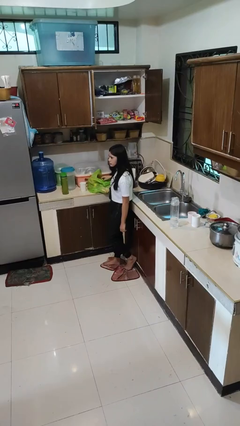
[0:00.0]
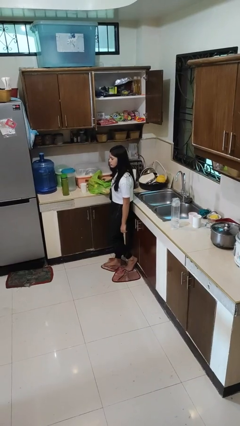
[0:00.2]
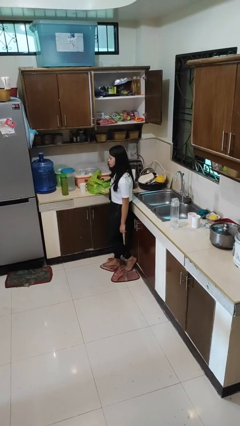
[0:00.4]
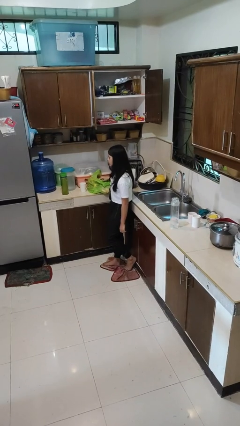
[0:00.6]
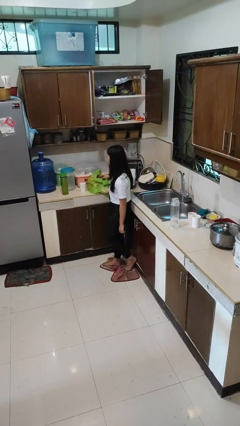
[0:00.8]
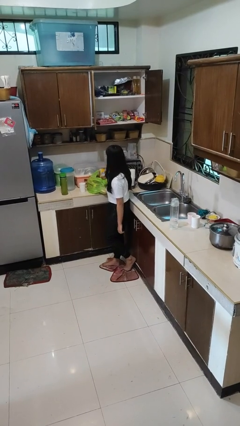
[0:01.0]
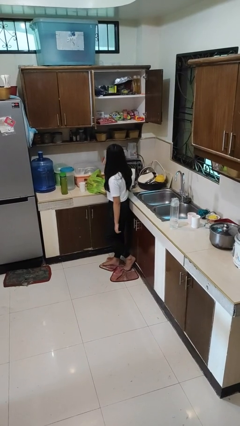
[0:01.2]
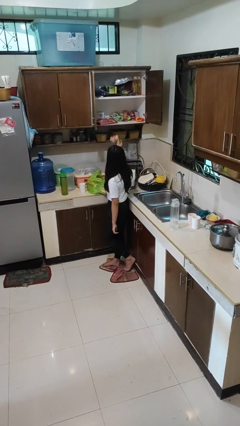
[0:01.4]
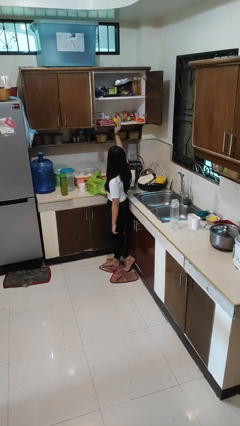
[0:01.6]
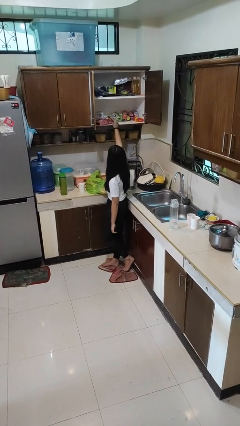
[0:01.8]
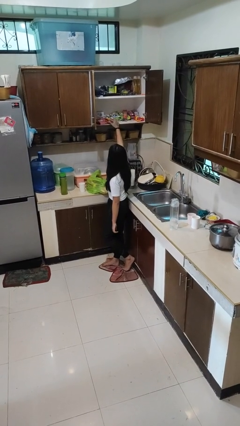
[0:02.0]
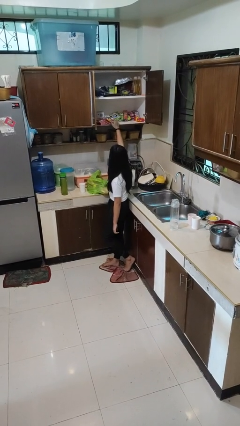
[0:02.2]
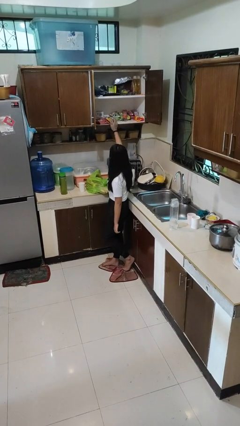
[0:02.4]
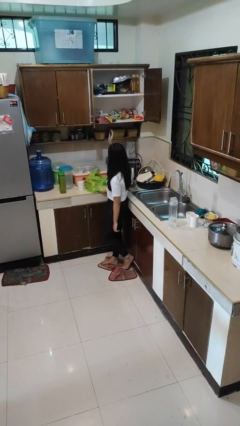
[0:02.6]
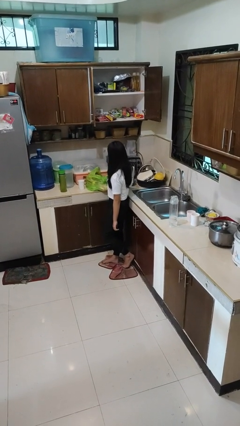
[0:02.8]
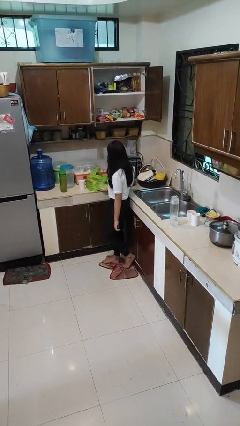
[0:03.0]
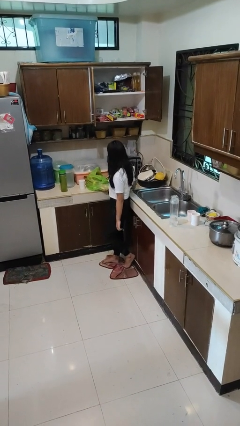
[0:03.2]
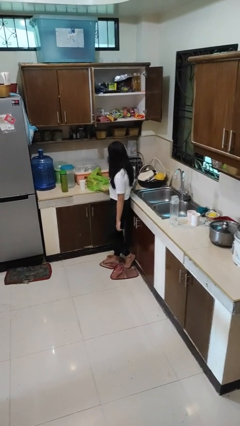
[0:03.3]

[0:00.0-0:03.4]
person loads groceries into cabinet

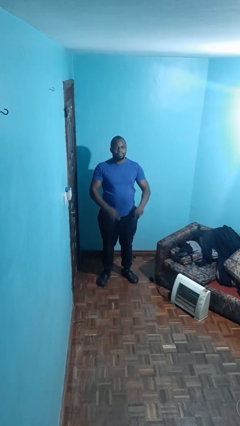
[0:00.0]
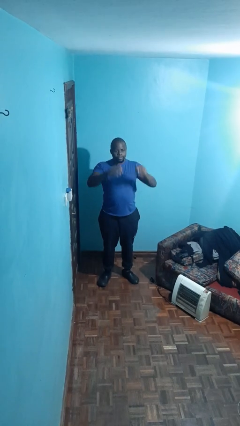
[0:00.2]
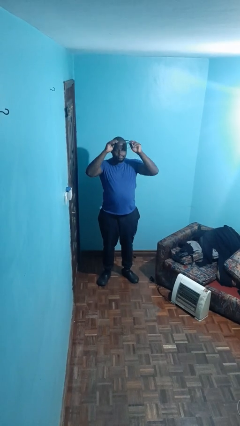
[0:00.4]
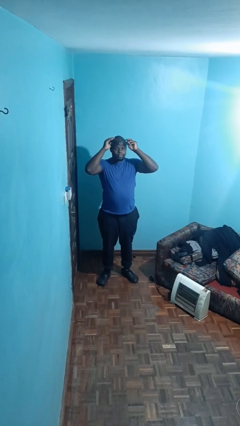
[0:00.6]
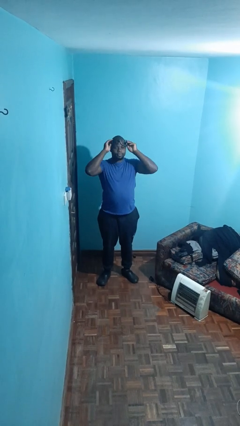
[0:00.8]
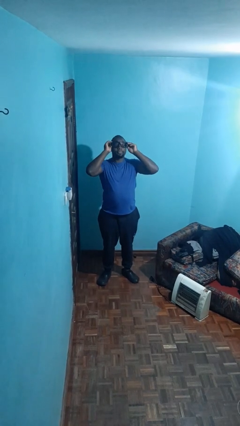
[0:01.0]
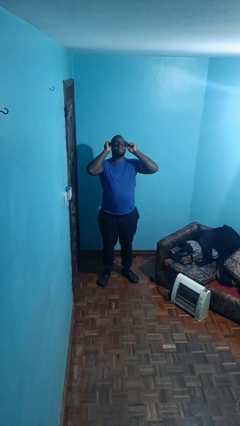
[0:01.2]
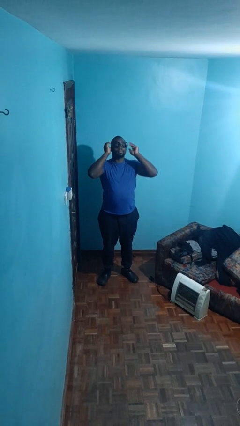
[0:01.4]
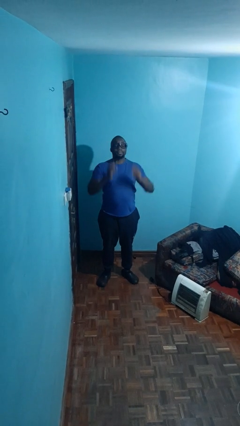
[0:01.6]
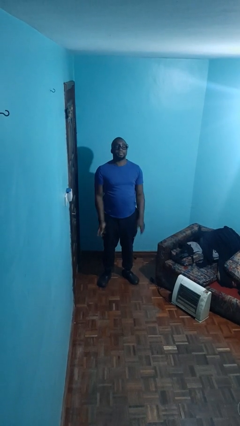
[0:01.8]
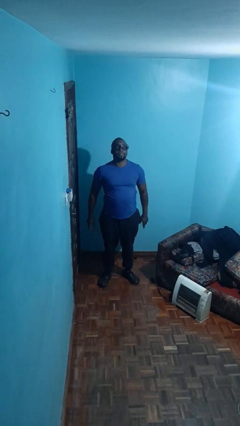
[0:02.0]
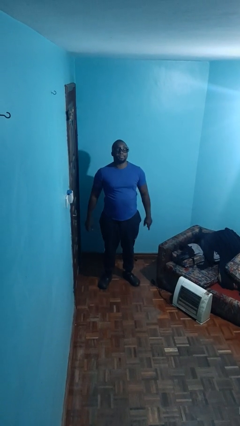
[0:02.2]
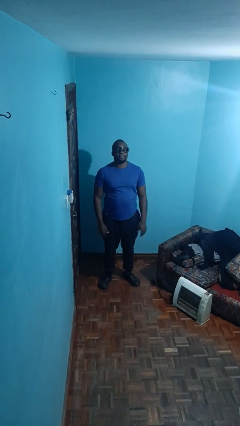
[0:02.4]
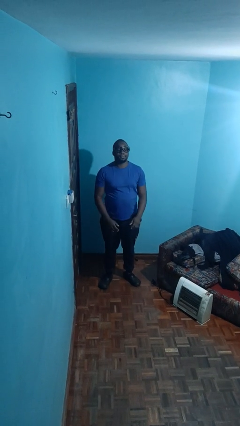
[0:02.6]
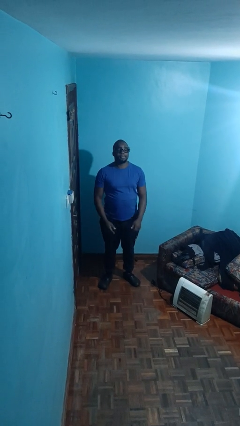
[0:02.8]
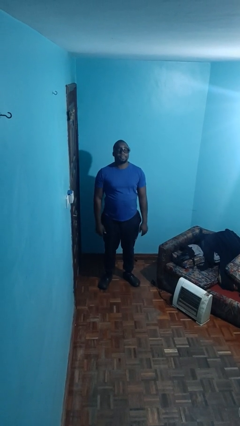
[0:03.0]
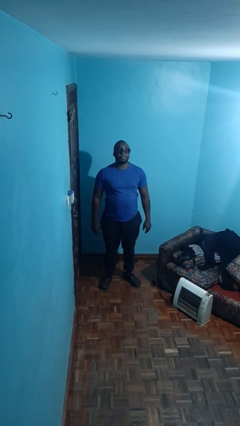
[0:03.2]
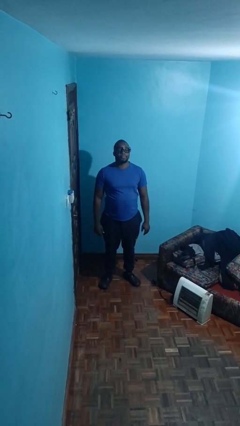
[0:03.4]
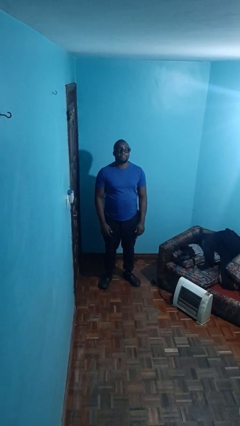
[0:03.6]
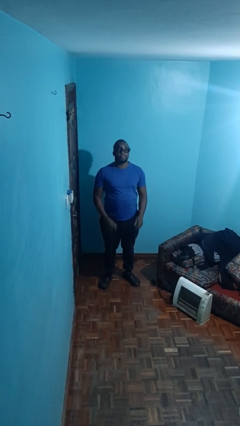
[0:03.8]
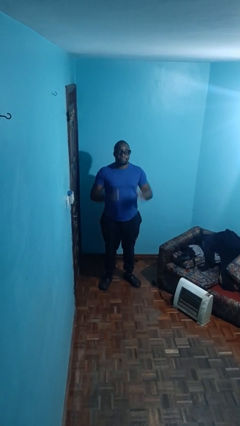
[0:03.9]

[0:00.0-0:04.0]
person puts on glasses

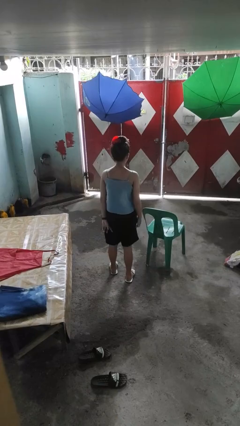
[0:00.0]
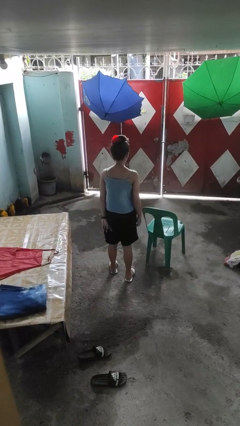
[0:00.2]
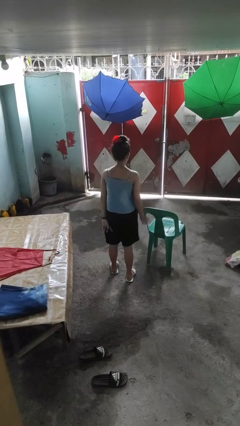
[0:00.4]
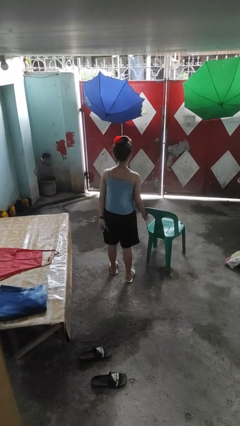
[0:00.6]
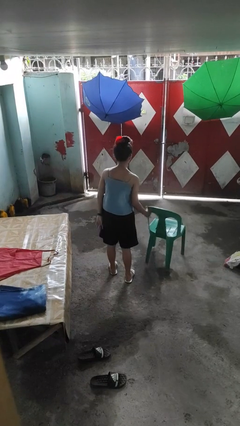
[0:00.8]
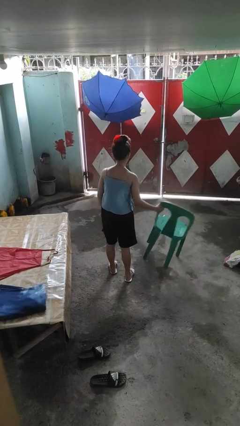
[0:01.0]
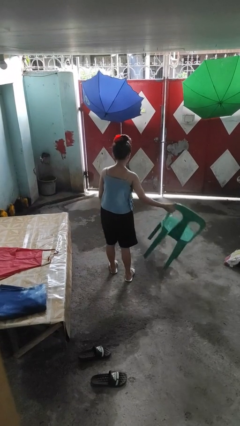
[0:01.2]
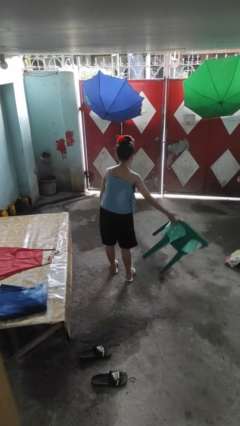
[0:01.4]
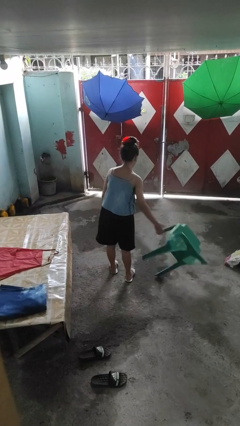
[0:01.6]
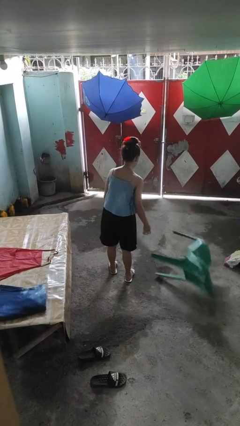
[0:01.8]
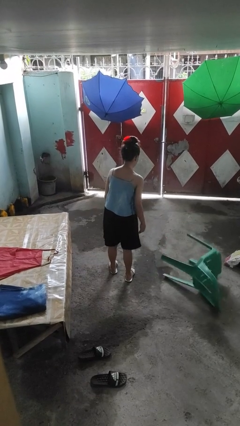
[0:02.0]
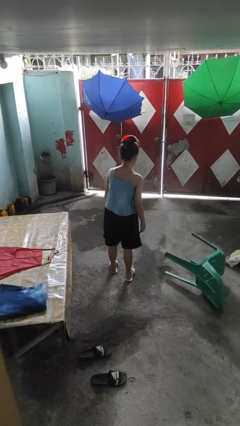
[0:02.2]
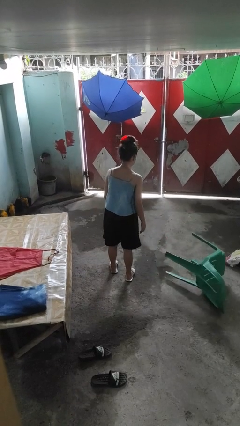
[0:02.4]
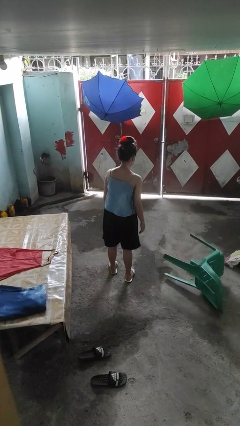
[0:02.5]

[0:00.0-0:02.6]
person knocks over furniture

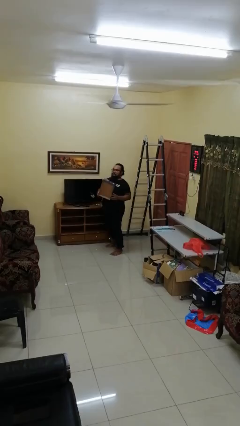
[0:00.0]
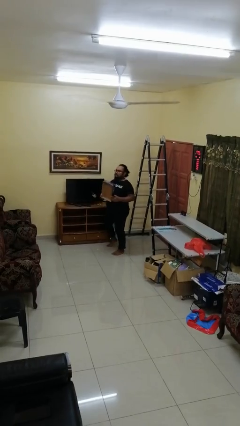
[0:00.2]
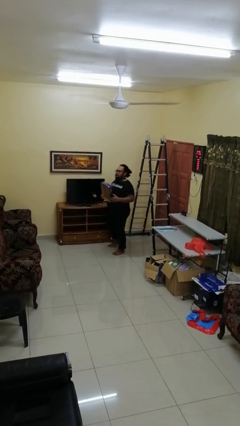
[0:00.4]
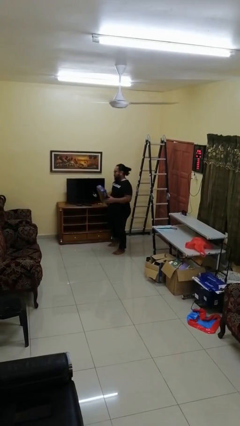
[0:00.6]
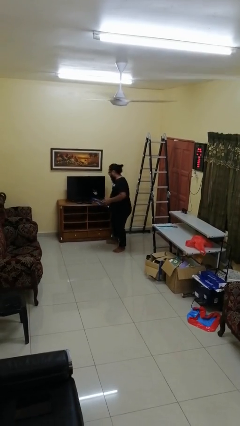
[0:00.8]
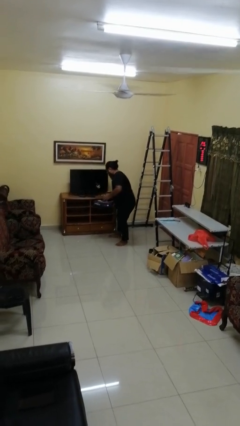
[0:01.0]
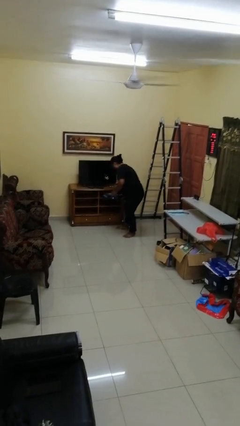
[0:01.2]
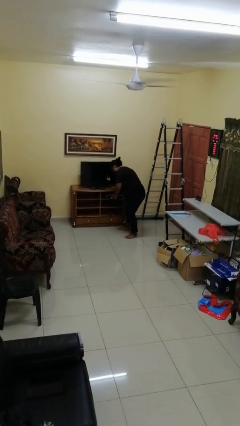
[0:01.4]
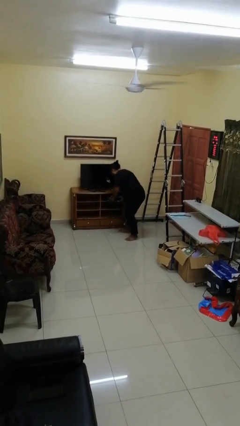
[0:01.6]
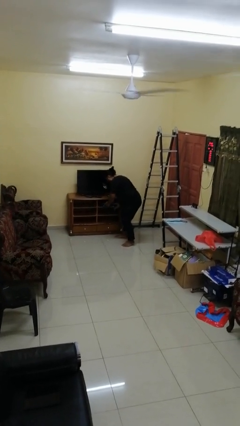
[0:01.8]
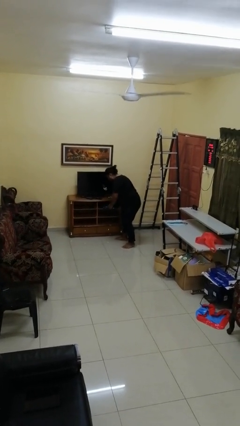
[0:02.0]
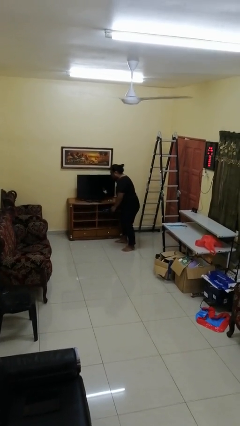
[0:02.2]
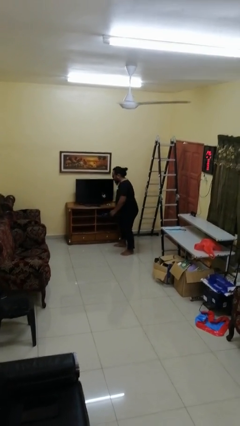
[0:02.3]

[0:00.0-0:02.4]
person puts down object into cabinet

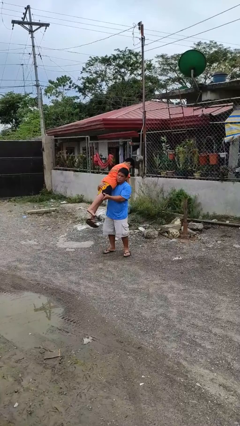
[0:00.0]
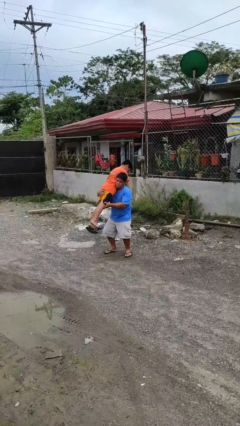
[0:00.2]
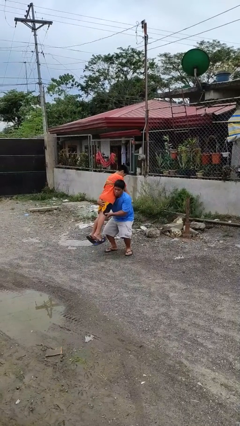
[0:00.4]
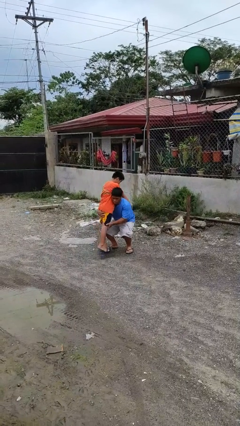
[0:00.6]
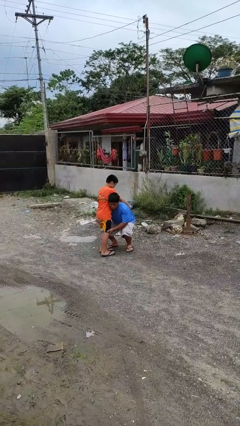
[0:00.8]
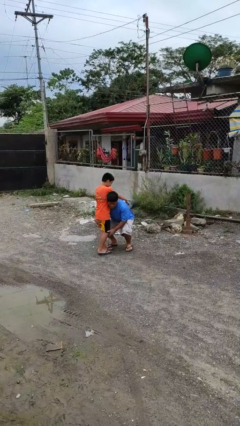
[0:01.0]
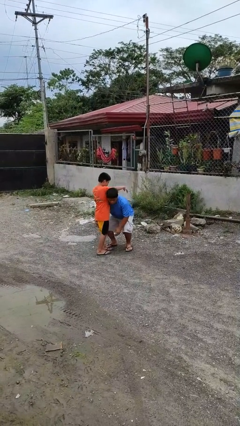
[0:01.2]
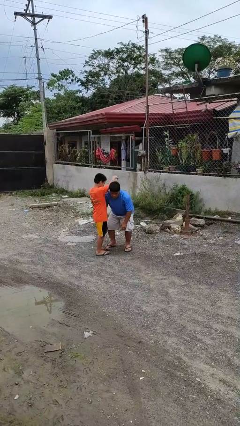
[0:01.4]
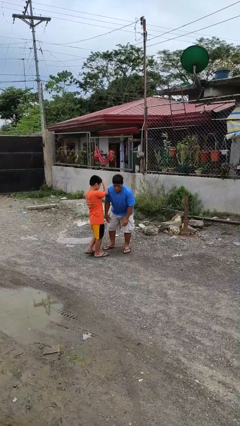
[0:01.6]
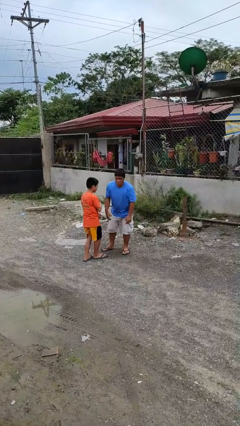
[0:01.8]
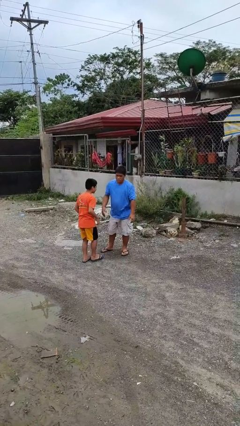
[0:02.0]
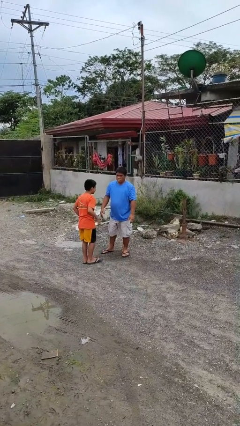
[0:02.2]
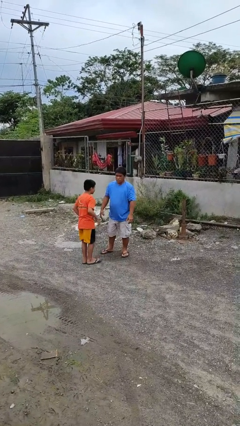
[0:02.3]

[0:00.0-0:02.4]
person puts down person

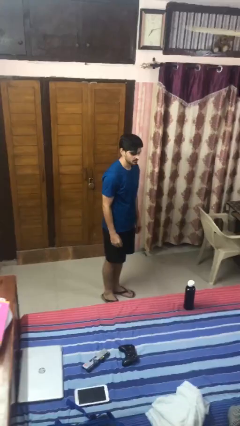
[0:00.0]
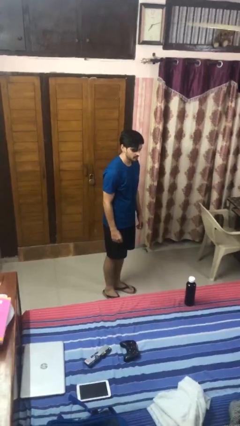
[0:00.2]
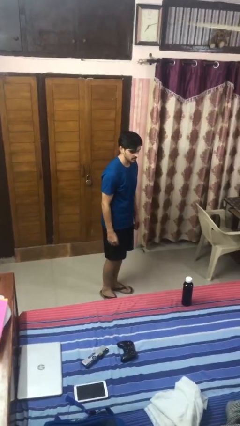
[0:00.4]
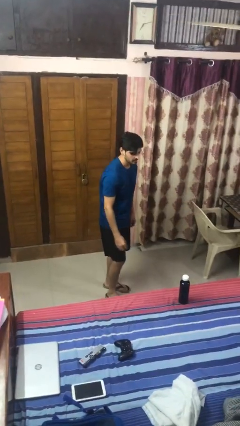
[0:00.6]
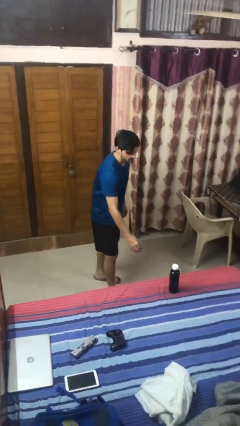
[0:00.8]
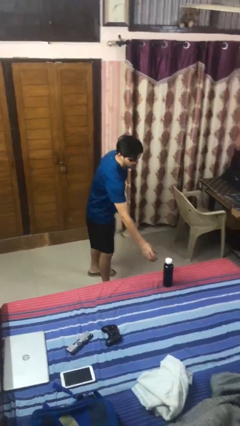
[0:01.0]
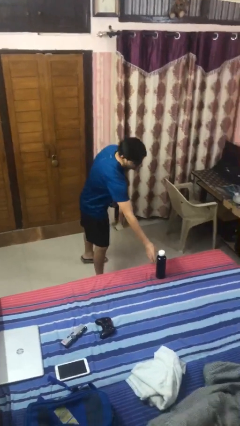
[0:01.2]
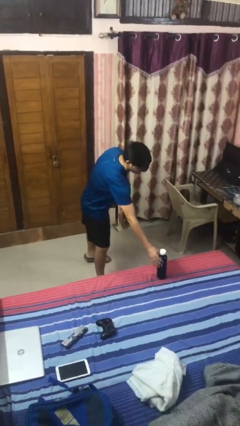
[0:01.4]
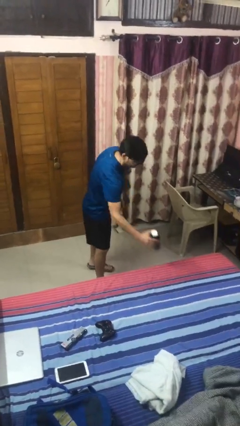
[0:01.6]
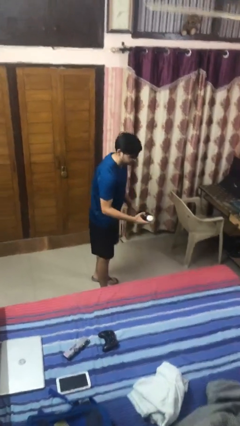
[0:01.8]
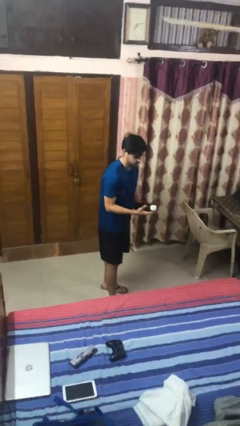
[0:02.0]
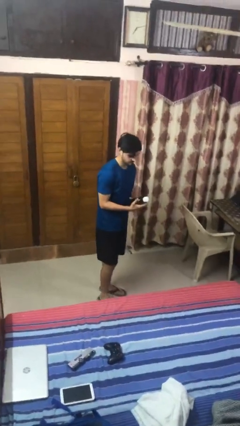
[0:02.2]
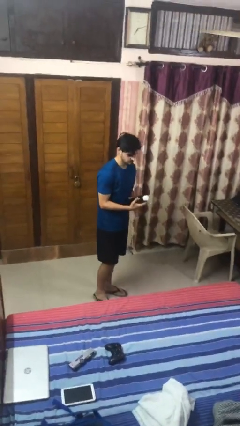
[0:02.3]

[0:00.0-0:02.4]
person picks up object from bed
